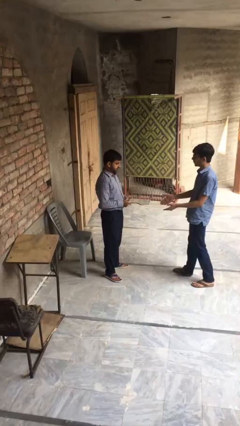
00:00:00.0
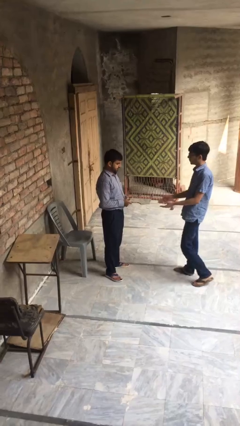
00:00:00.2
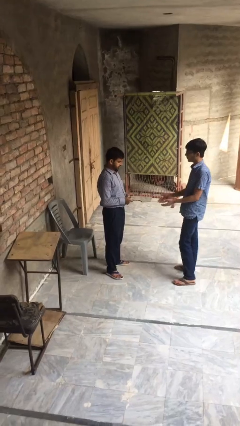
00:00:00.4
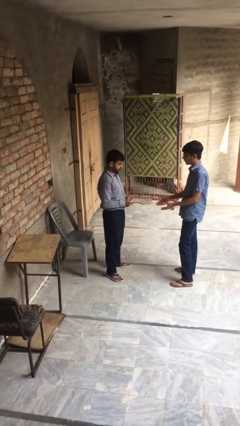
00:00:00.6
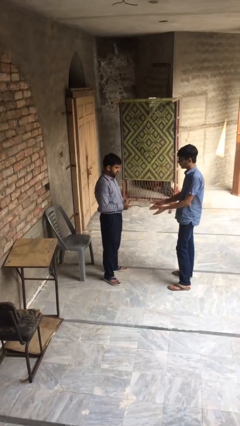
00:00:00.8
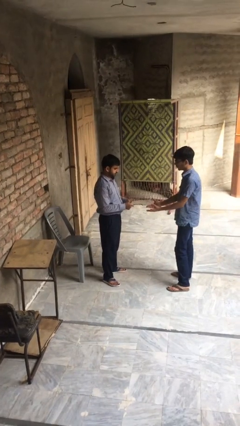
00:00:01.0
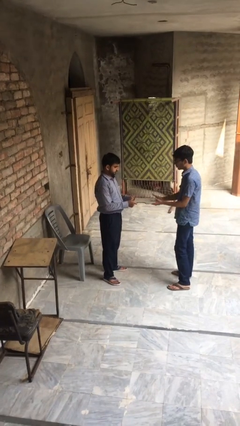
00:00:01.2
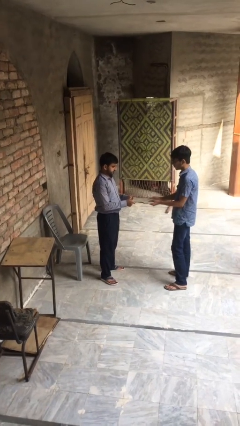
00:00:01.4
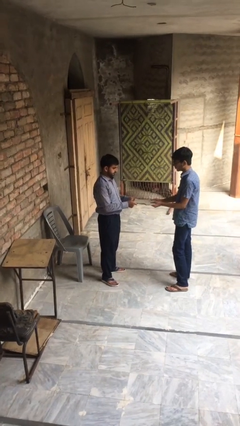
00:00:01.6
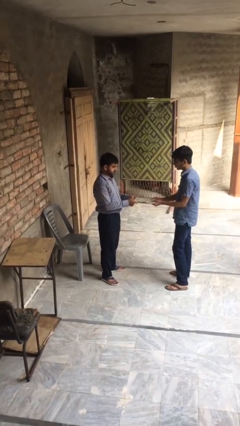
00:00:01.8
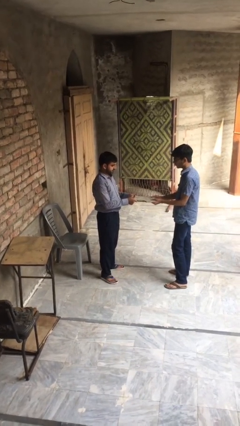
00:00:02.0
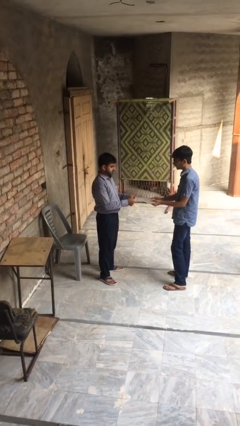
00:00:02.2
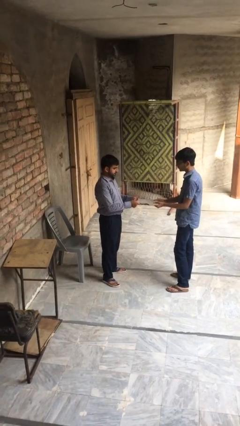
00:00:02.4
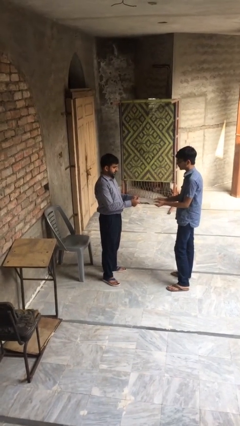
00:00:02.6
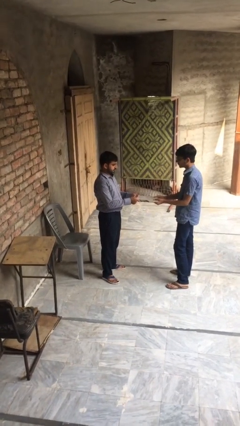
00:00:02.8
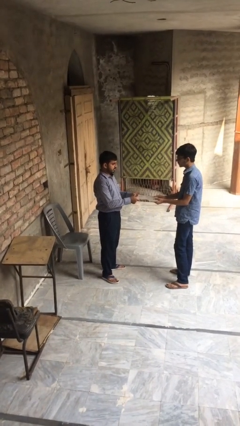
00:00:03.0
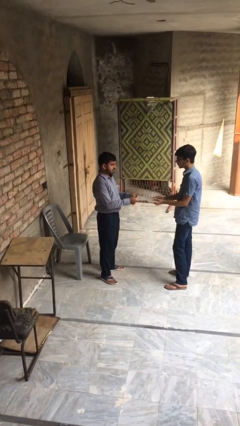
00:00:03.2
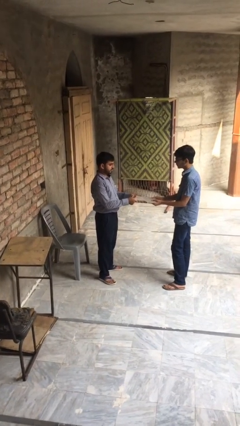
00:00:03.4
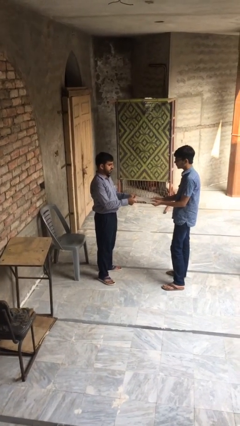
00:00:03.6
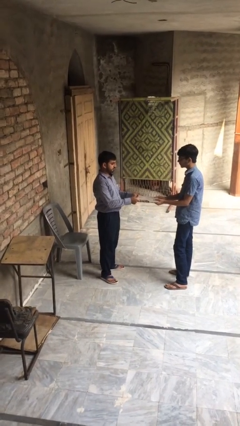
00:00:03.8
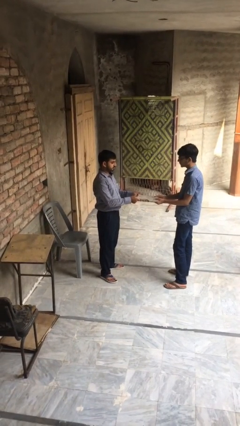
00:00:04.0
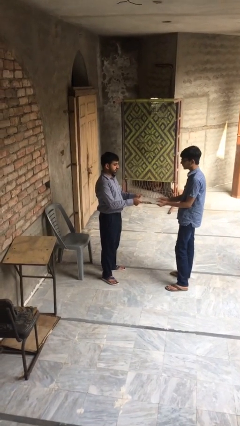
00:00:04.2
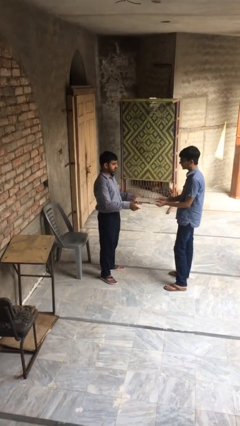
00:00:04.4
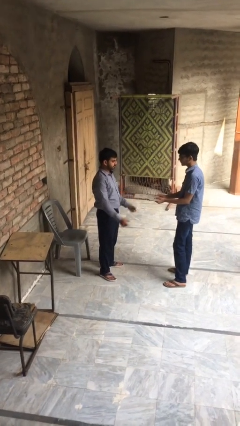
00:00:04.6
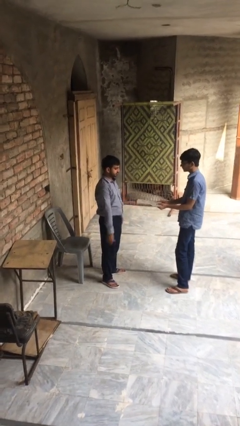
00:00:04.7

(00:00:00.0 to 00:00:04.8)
person transfers object to person

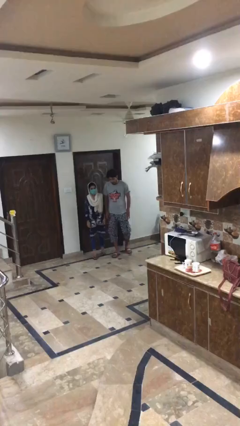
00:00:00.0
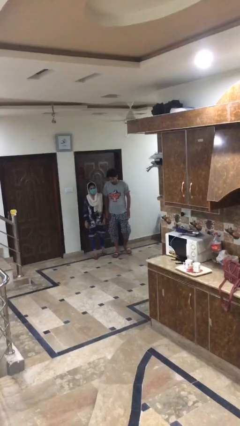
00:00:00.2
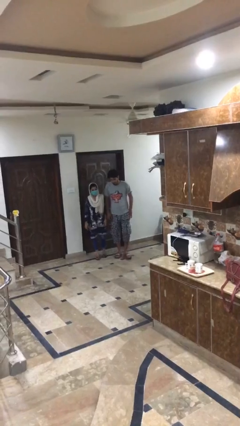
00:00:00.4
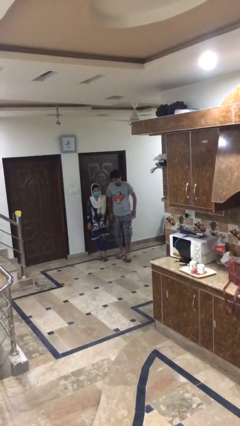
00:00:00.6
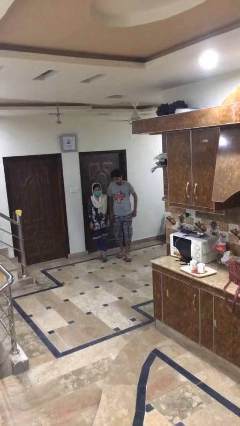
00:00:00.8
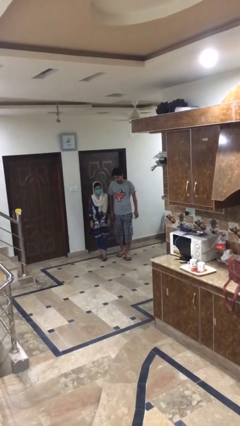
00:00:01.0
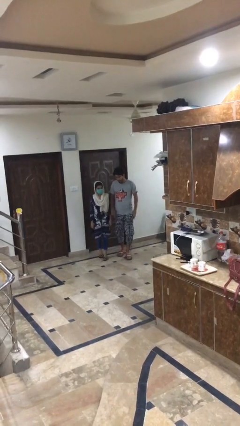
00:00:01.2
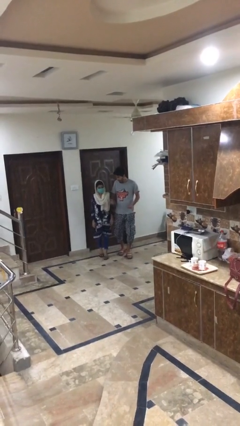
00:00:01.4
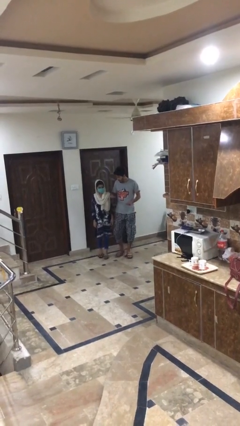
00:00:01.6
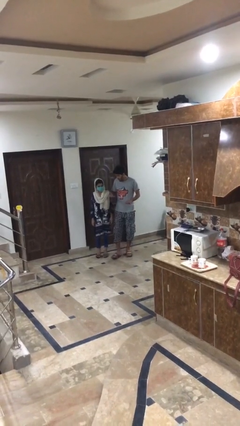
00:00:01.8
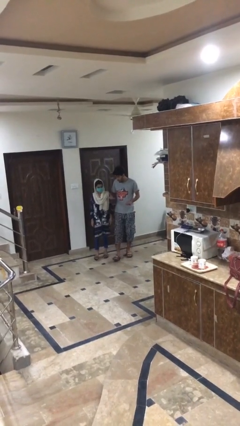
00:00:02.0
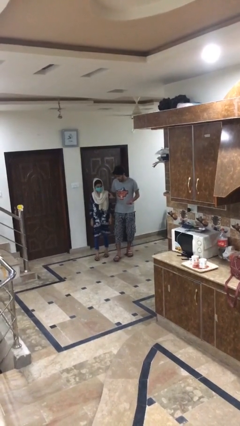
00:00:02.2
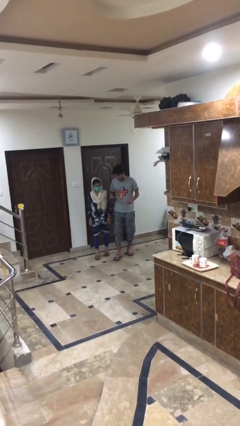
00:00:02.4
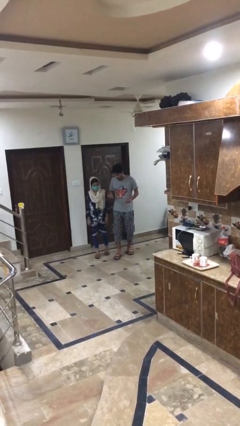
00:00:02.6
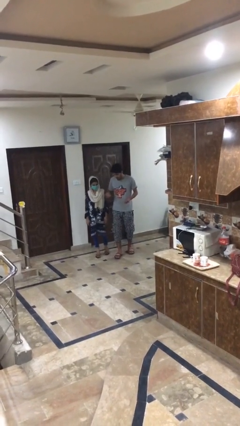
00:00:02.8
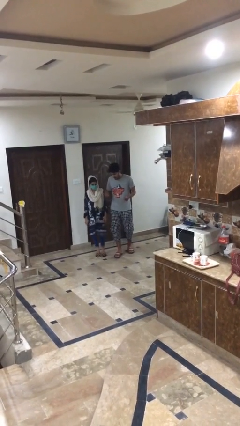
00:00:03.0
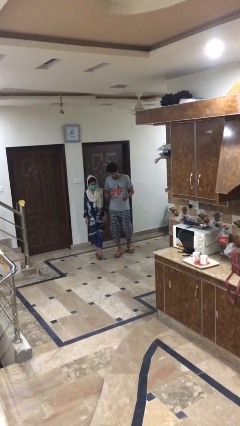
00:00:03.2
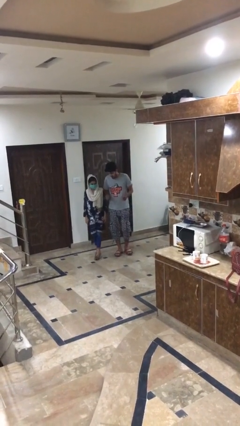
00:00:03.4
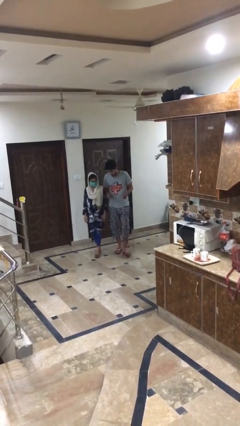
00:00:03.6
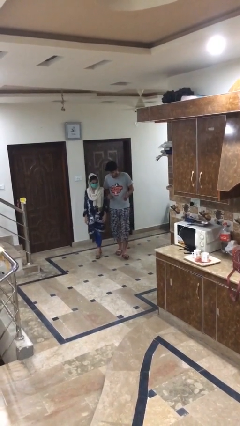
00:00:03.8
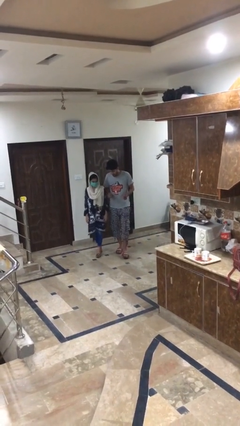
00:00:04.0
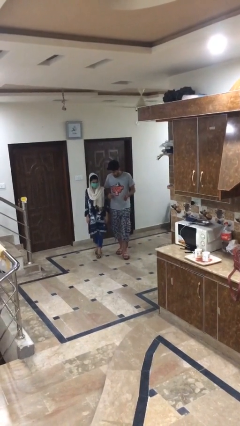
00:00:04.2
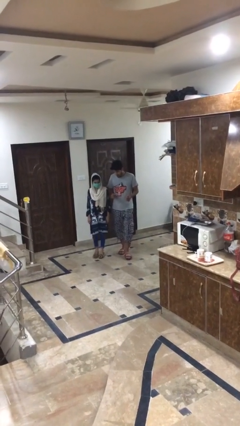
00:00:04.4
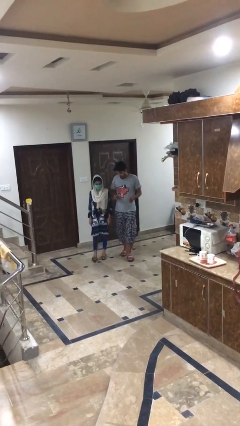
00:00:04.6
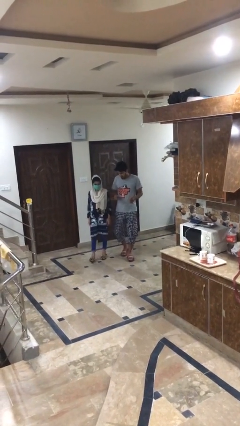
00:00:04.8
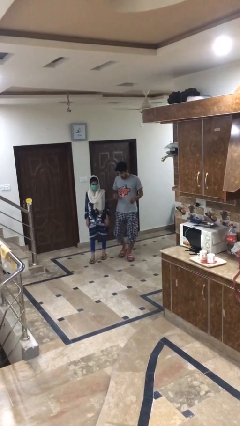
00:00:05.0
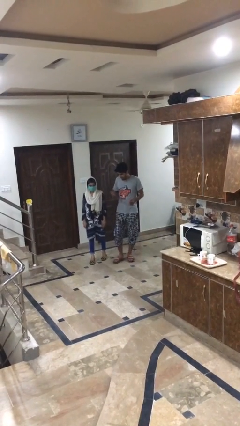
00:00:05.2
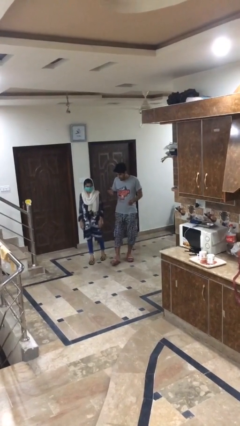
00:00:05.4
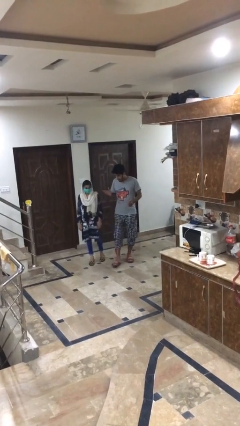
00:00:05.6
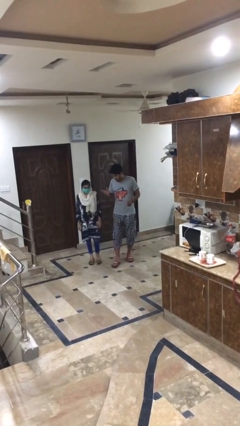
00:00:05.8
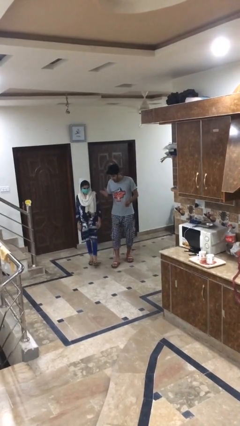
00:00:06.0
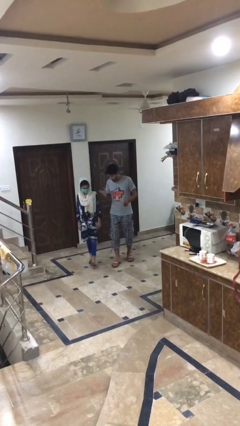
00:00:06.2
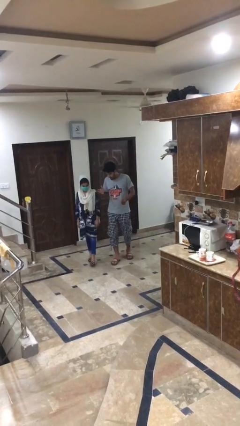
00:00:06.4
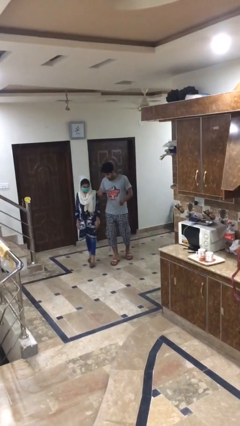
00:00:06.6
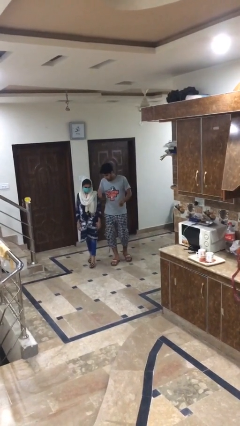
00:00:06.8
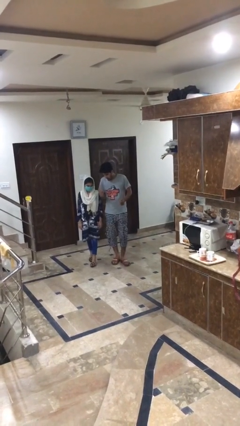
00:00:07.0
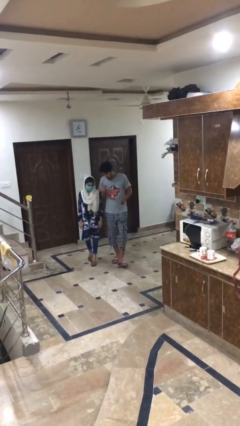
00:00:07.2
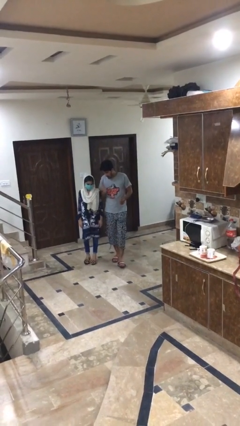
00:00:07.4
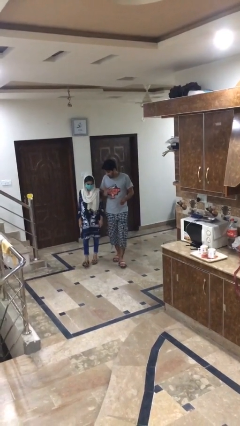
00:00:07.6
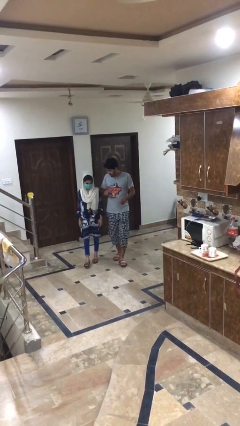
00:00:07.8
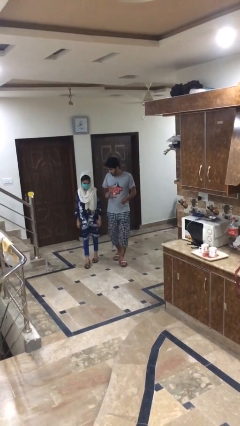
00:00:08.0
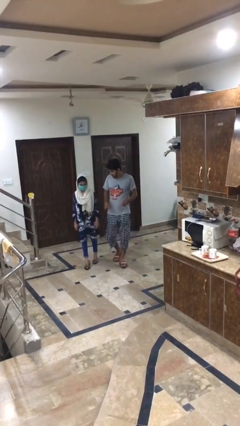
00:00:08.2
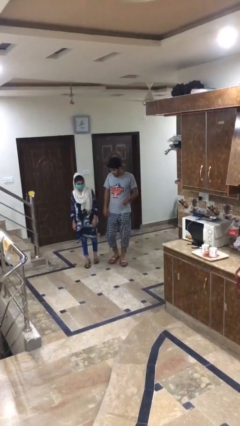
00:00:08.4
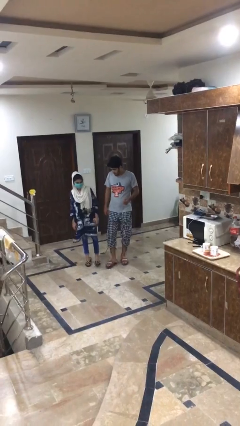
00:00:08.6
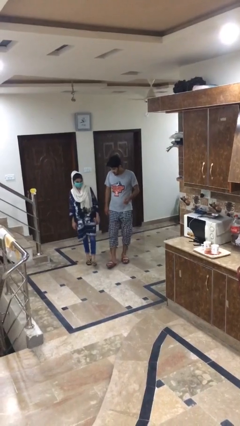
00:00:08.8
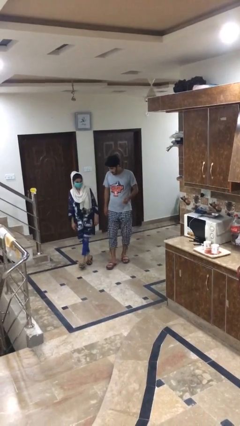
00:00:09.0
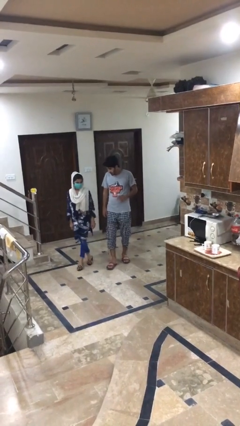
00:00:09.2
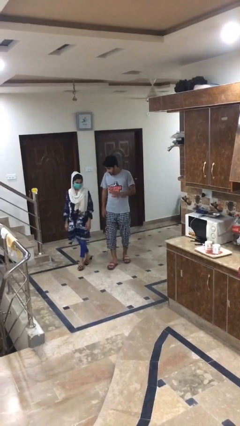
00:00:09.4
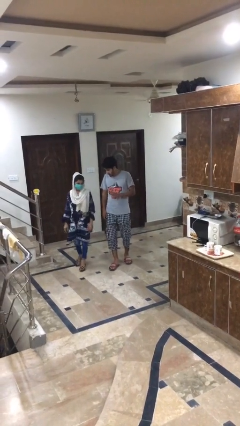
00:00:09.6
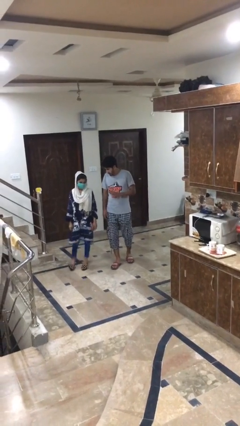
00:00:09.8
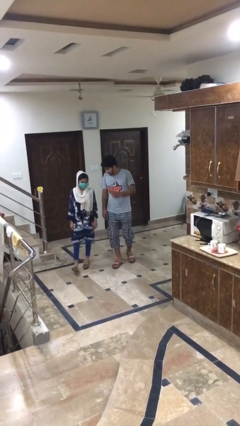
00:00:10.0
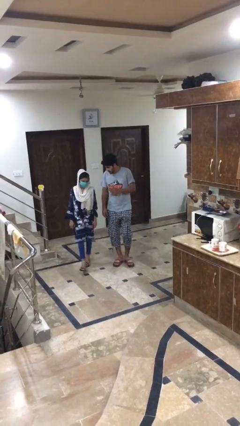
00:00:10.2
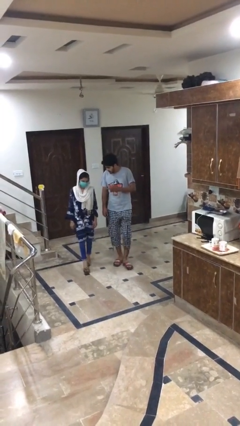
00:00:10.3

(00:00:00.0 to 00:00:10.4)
person talks to person

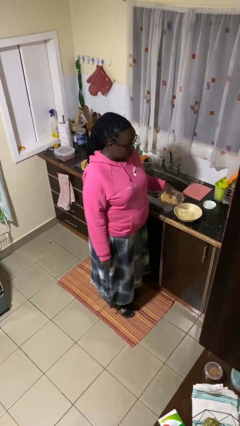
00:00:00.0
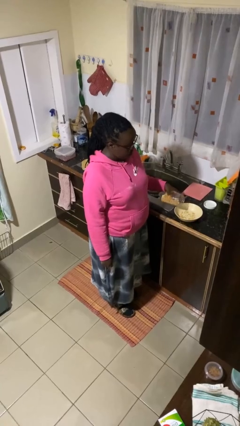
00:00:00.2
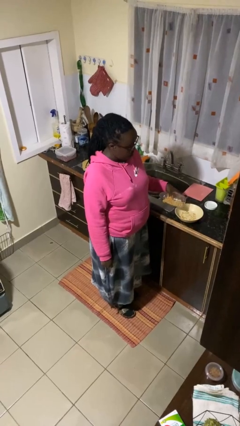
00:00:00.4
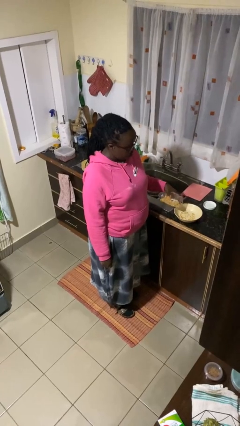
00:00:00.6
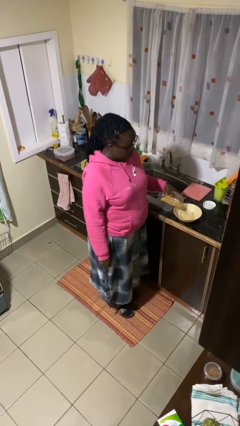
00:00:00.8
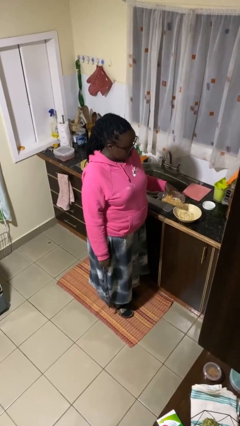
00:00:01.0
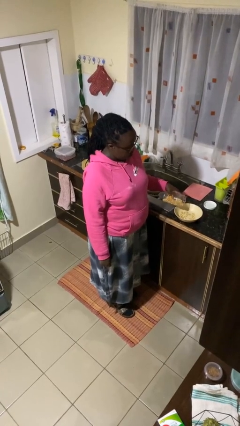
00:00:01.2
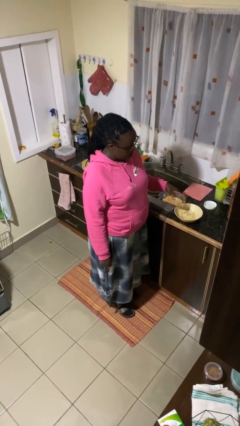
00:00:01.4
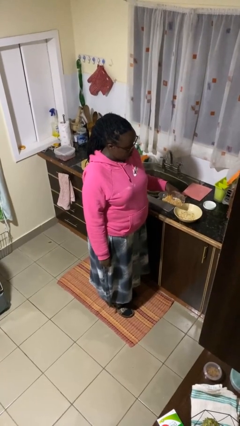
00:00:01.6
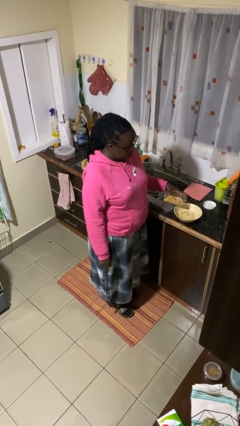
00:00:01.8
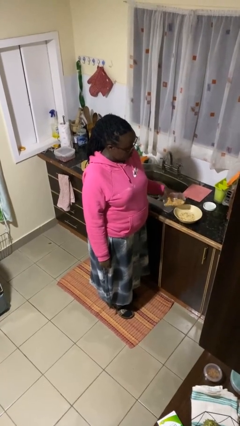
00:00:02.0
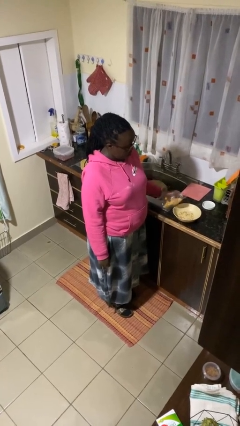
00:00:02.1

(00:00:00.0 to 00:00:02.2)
person pours into bowl

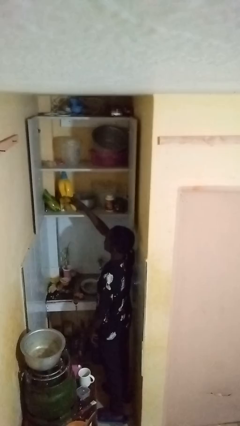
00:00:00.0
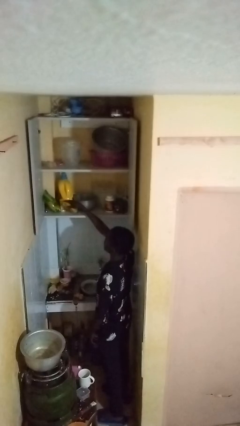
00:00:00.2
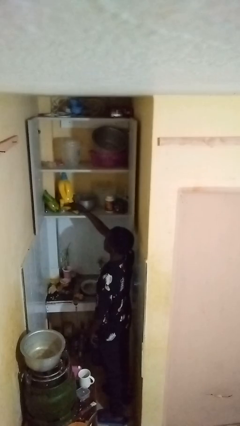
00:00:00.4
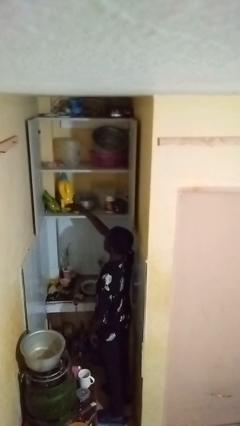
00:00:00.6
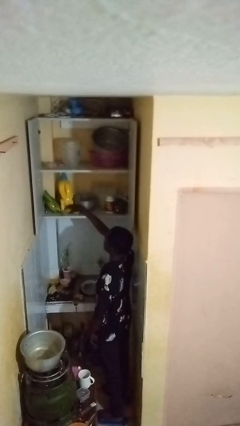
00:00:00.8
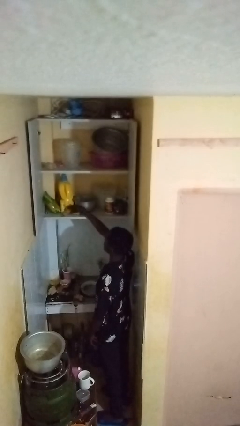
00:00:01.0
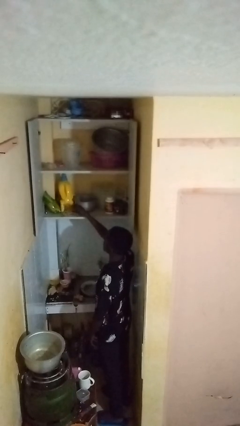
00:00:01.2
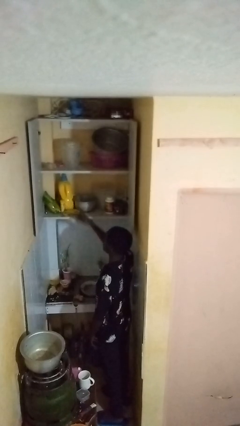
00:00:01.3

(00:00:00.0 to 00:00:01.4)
person puts object in cabinet
